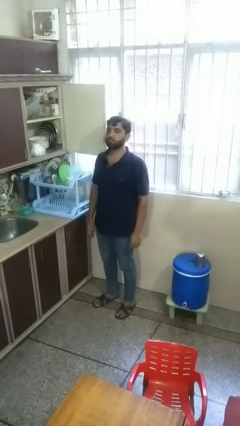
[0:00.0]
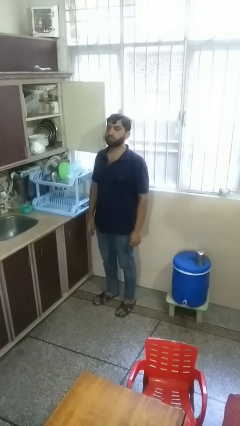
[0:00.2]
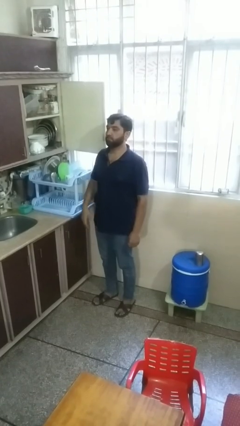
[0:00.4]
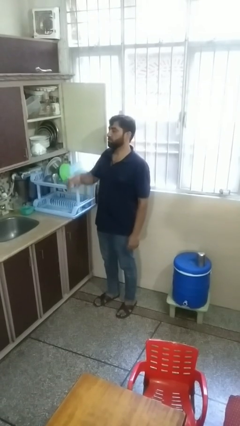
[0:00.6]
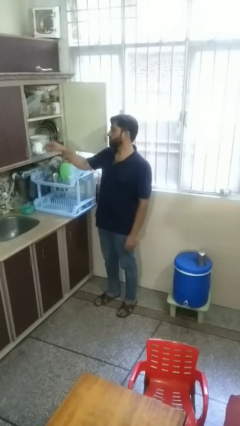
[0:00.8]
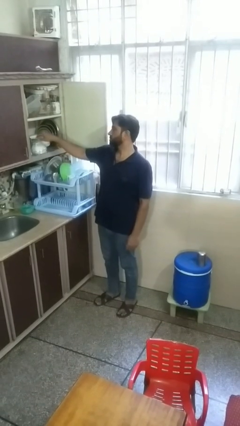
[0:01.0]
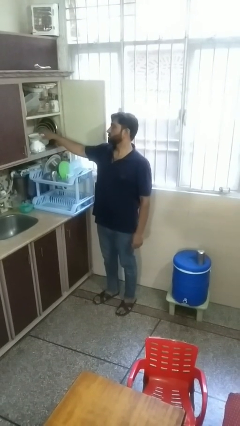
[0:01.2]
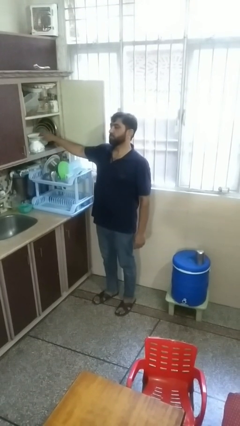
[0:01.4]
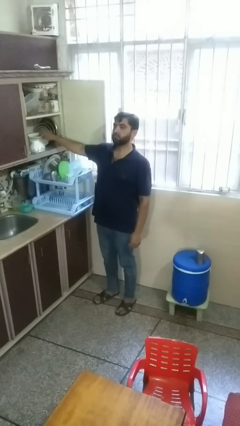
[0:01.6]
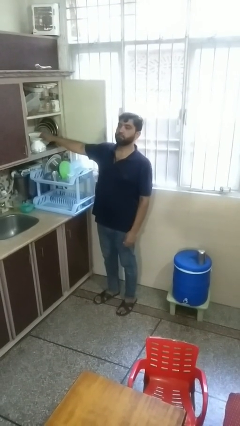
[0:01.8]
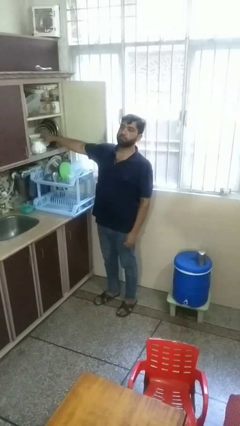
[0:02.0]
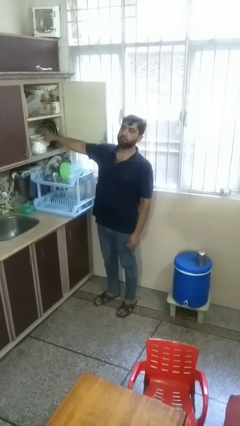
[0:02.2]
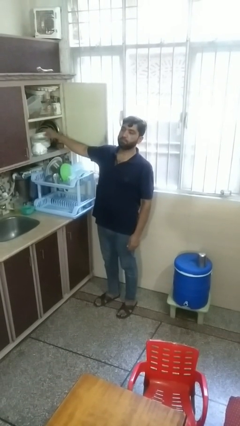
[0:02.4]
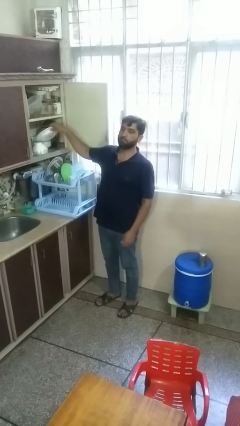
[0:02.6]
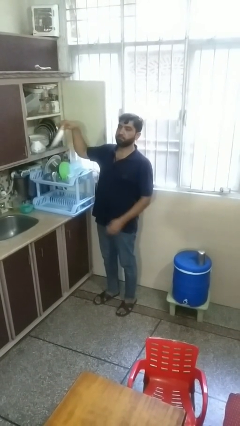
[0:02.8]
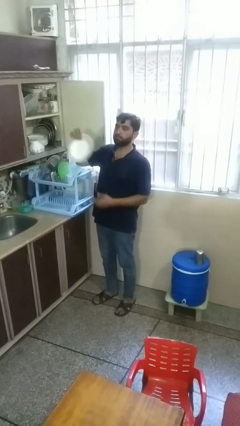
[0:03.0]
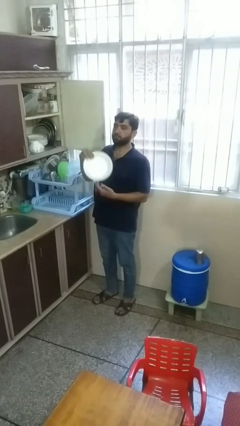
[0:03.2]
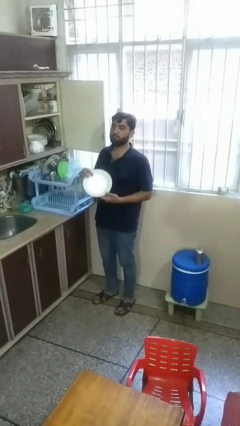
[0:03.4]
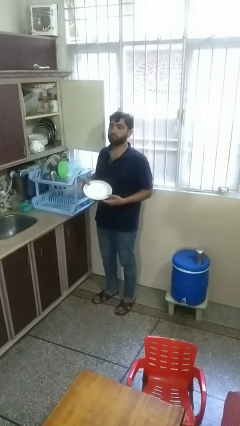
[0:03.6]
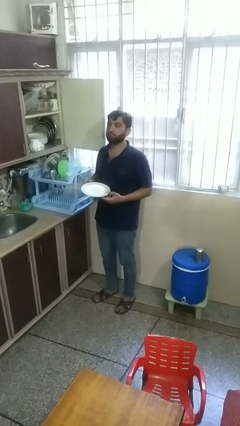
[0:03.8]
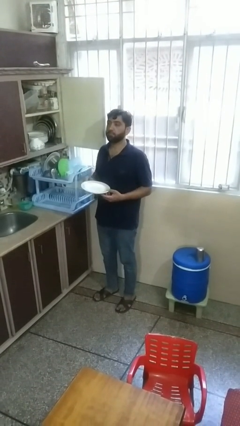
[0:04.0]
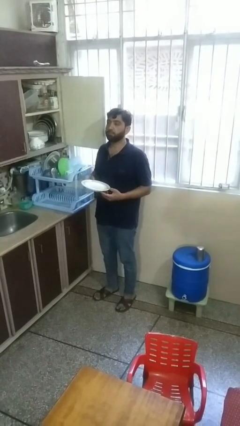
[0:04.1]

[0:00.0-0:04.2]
person takes object from cabinet

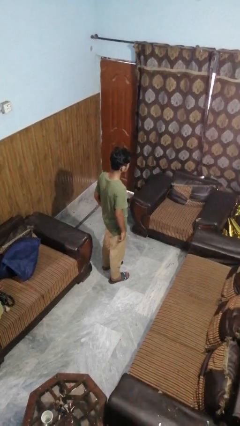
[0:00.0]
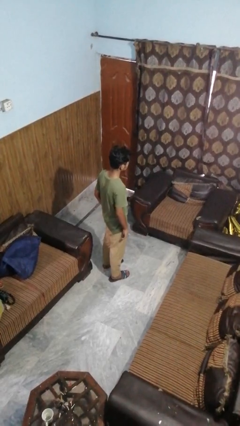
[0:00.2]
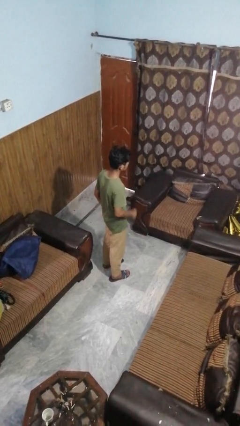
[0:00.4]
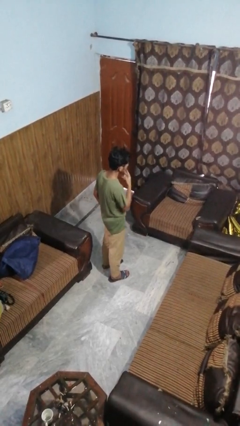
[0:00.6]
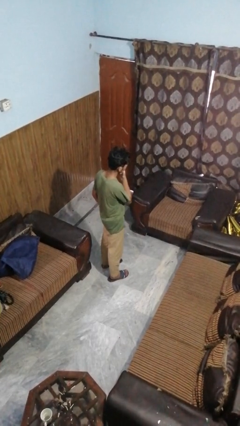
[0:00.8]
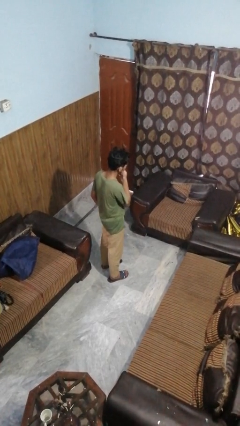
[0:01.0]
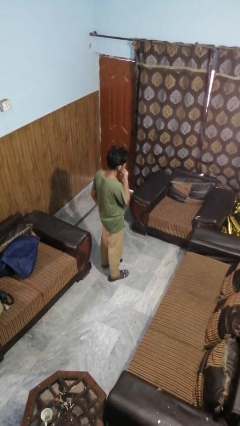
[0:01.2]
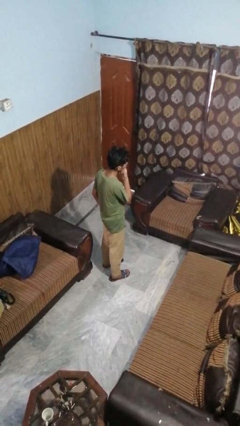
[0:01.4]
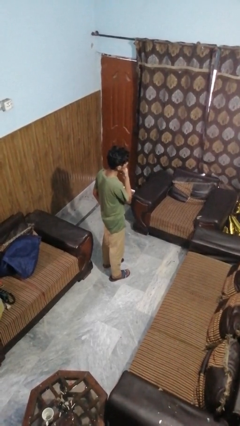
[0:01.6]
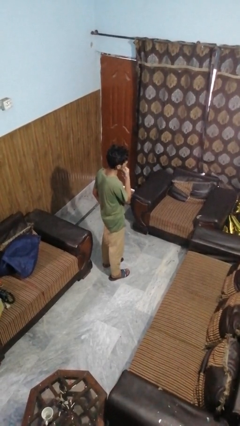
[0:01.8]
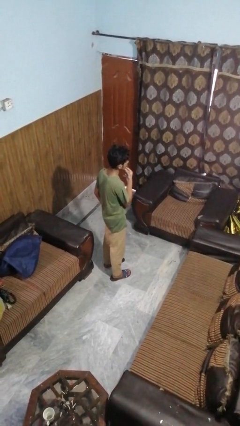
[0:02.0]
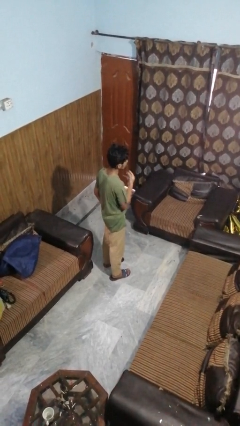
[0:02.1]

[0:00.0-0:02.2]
person strokes chin

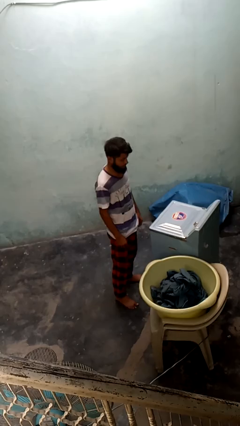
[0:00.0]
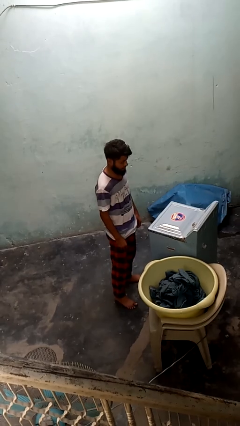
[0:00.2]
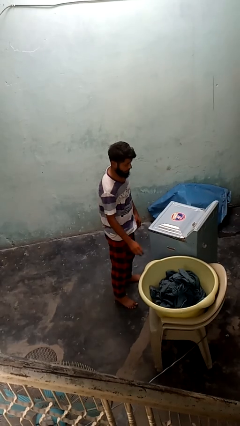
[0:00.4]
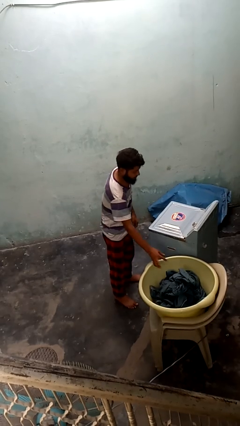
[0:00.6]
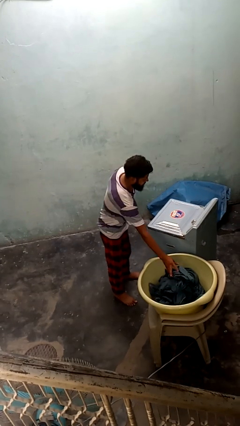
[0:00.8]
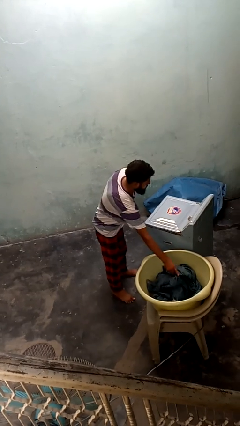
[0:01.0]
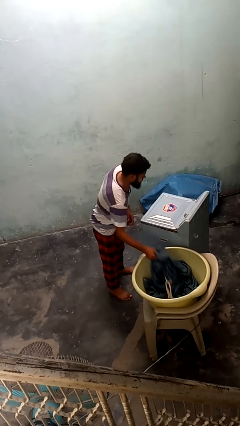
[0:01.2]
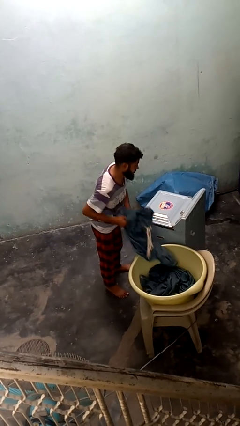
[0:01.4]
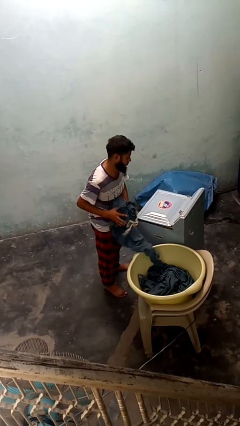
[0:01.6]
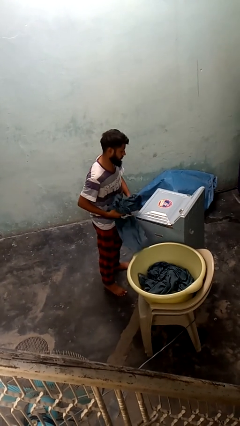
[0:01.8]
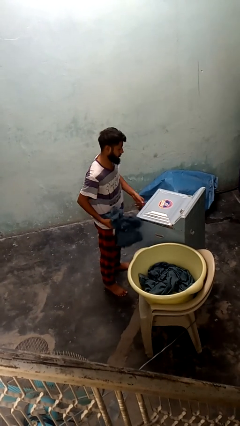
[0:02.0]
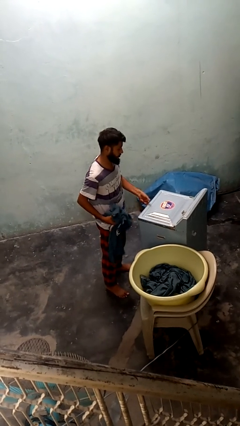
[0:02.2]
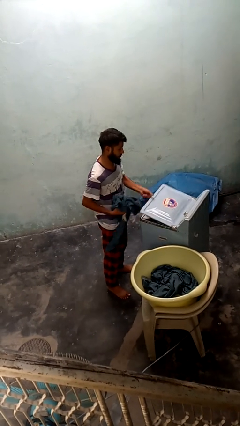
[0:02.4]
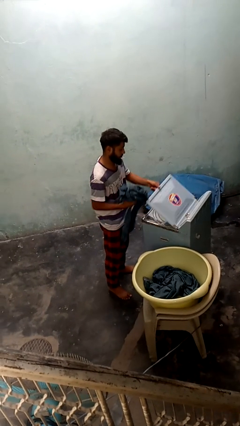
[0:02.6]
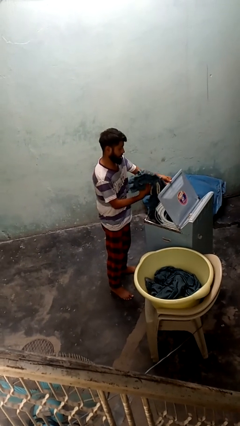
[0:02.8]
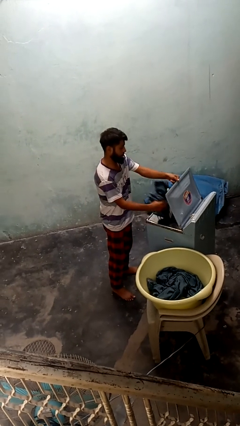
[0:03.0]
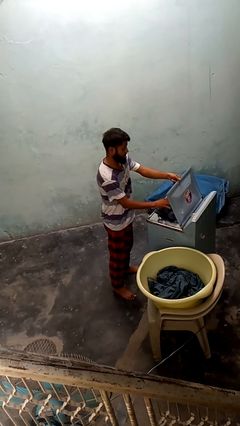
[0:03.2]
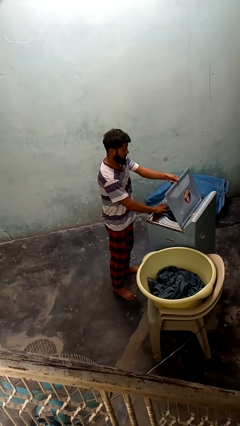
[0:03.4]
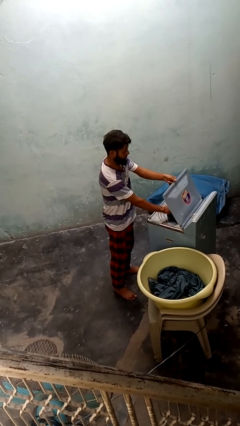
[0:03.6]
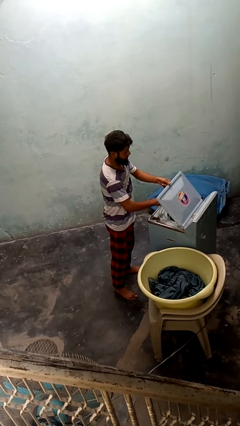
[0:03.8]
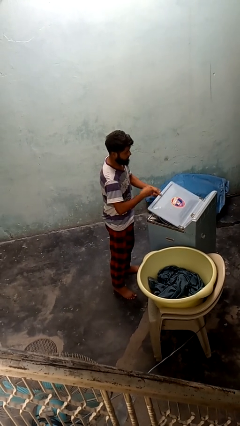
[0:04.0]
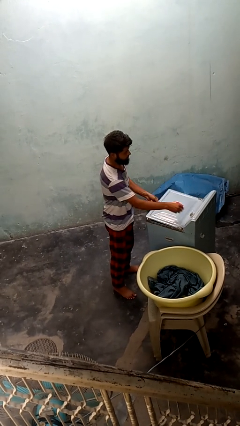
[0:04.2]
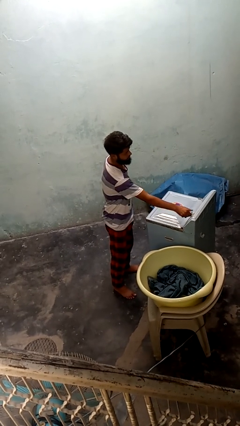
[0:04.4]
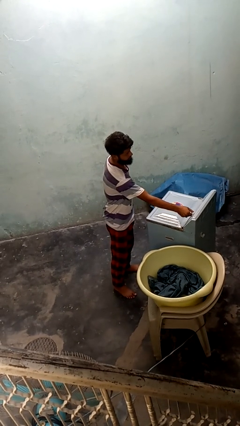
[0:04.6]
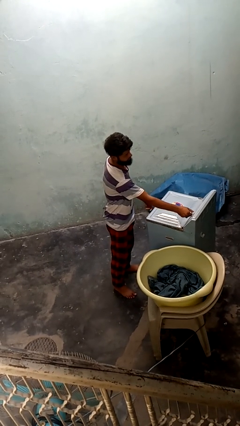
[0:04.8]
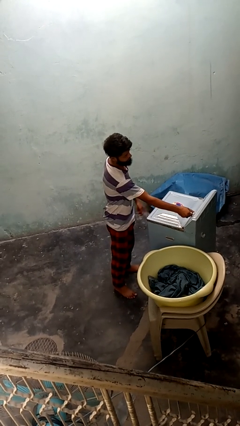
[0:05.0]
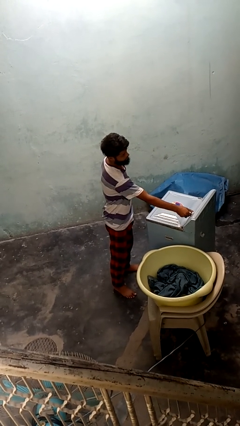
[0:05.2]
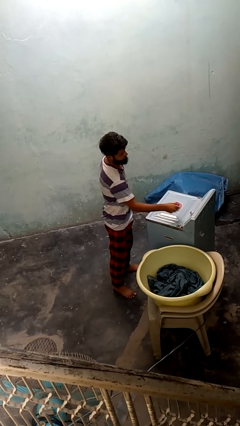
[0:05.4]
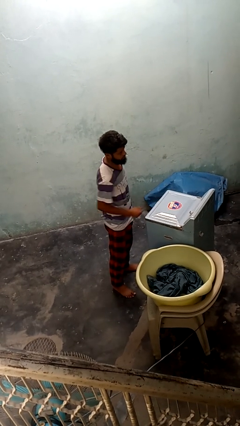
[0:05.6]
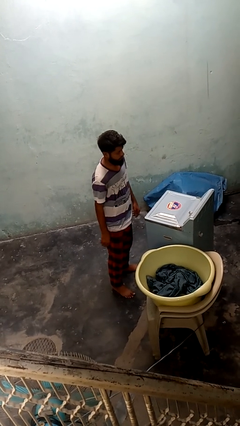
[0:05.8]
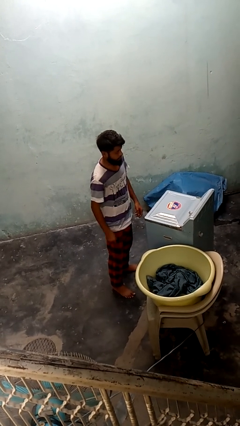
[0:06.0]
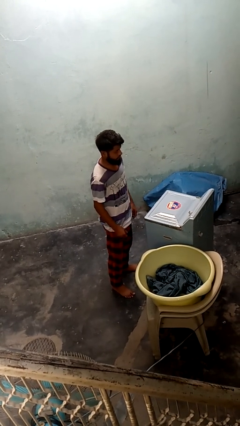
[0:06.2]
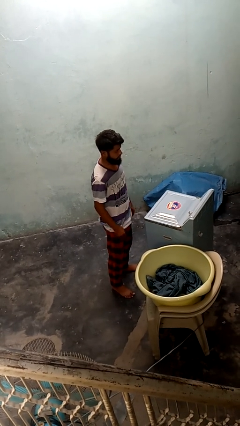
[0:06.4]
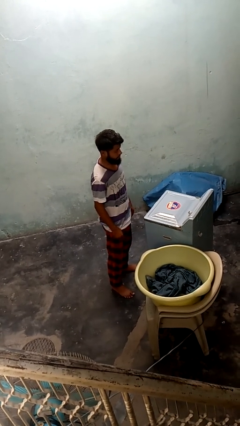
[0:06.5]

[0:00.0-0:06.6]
person loads dryer

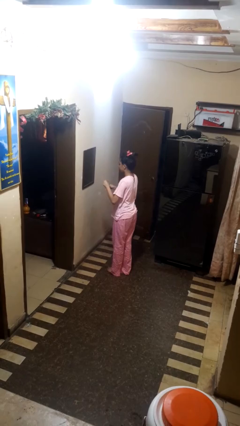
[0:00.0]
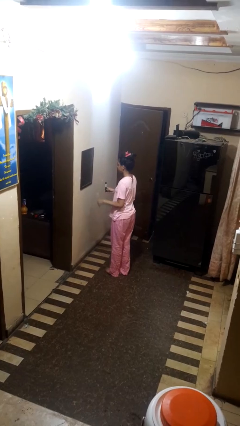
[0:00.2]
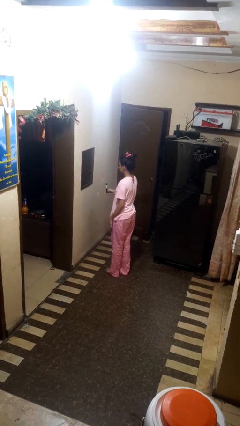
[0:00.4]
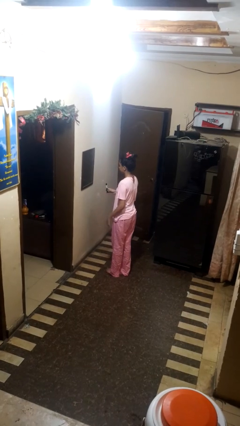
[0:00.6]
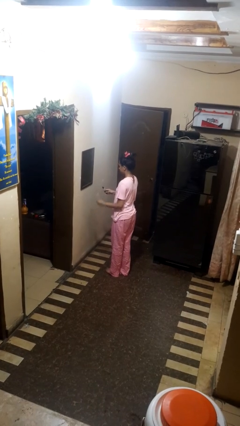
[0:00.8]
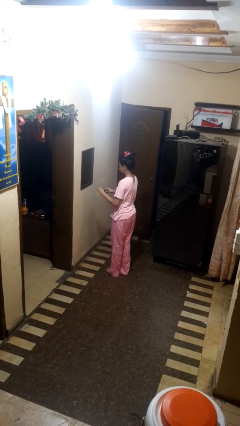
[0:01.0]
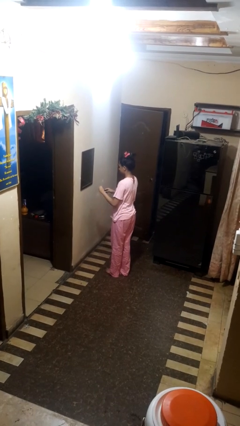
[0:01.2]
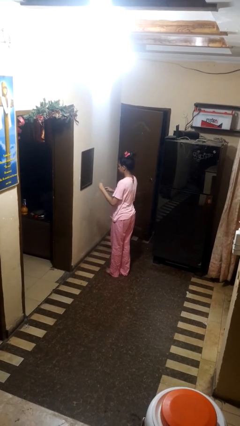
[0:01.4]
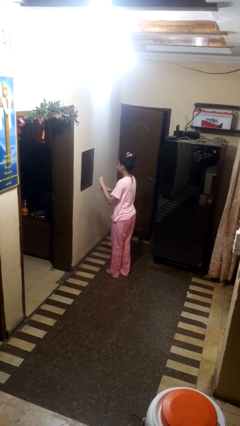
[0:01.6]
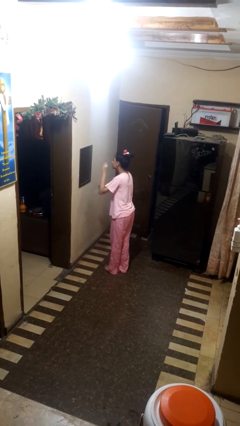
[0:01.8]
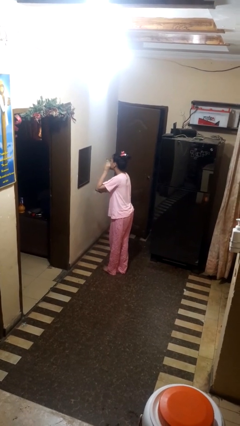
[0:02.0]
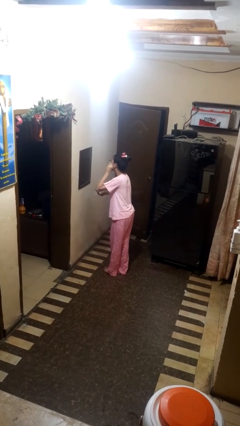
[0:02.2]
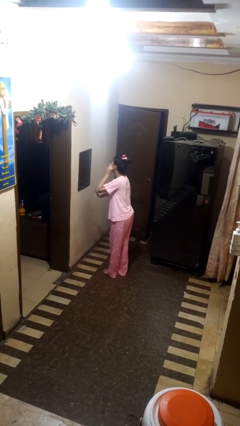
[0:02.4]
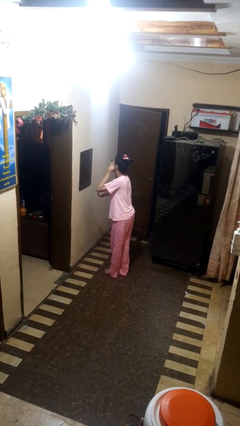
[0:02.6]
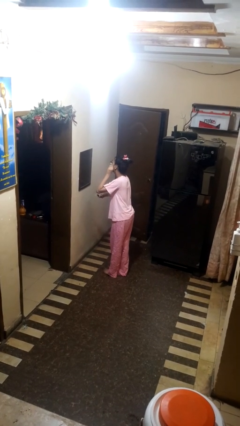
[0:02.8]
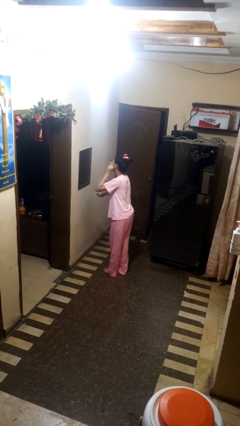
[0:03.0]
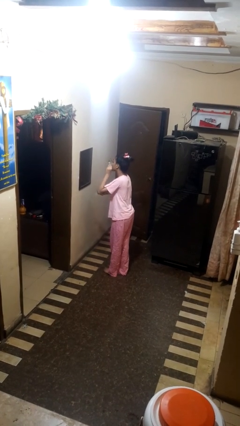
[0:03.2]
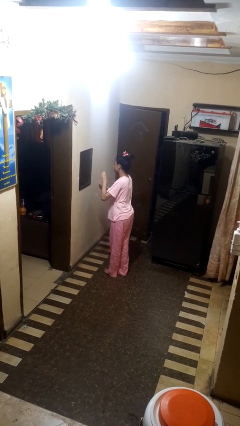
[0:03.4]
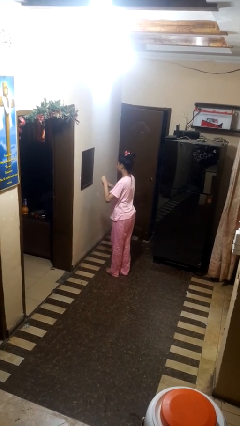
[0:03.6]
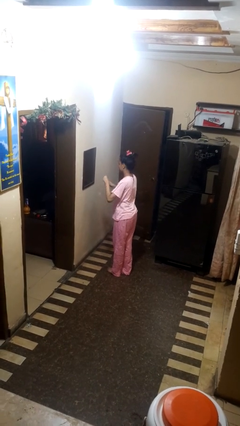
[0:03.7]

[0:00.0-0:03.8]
person applies eye makeup

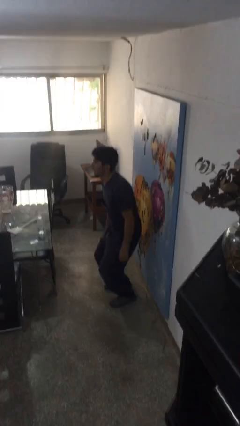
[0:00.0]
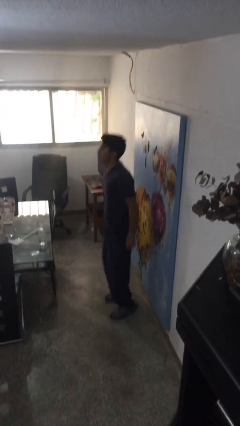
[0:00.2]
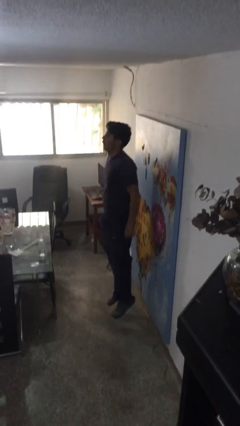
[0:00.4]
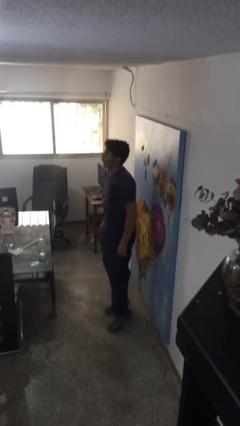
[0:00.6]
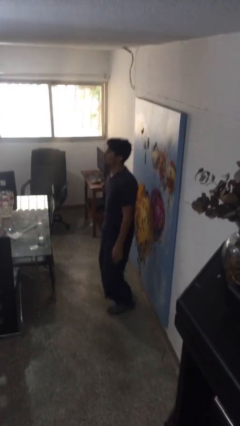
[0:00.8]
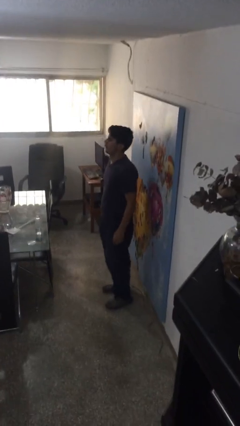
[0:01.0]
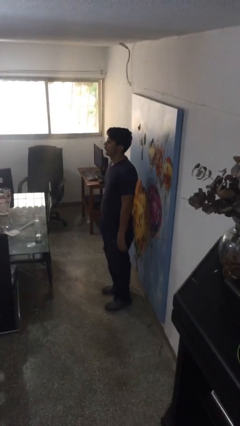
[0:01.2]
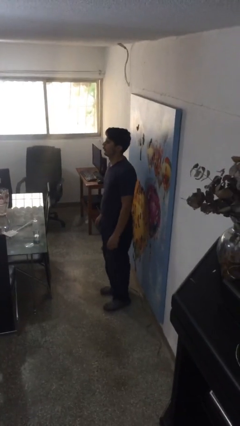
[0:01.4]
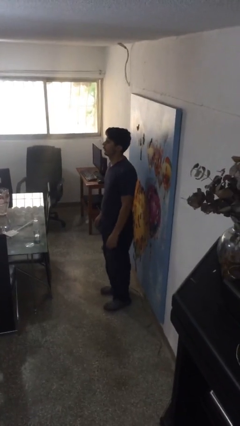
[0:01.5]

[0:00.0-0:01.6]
person jumps
